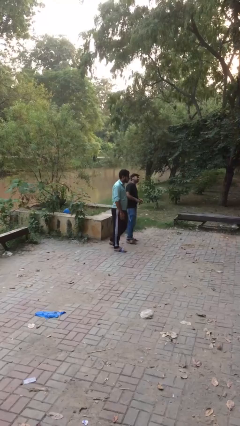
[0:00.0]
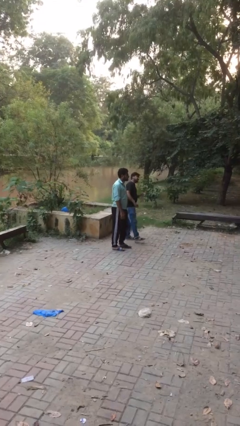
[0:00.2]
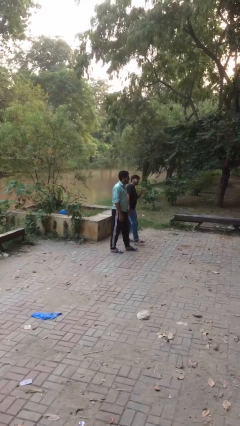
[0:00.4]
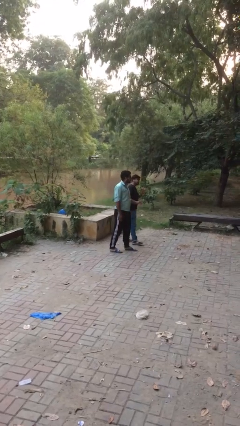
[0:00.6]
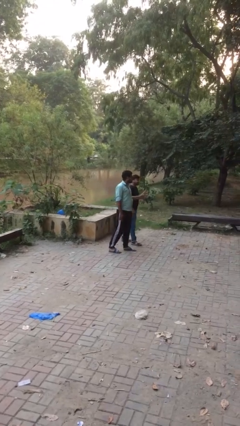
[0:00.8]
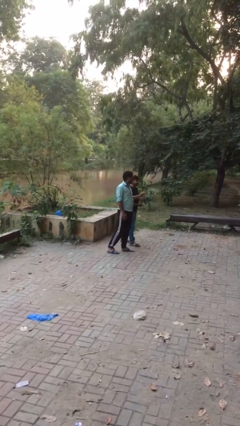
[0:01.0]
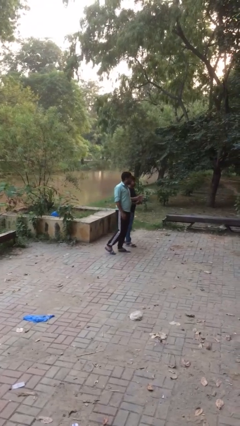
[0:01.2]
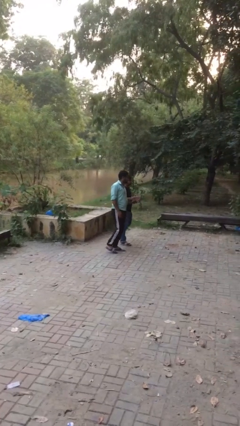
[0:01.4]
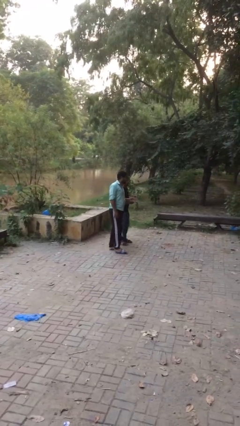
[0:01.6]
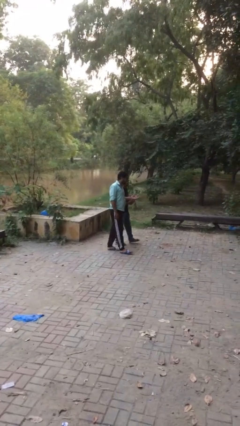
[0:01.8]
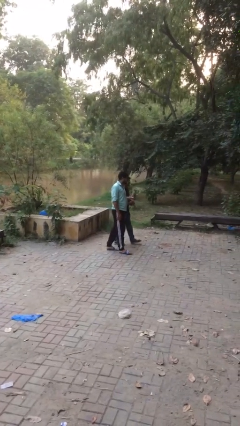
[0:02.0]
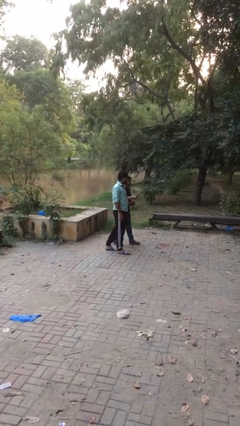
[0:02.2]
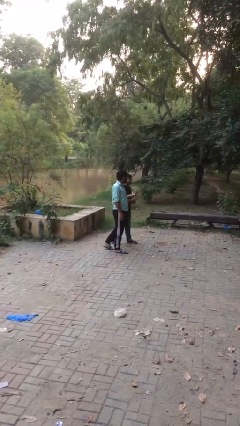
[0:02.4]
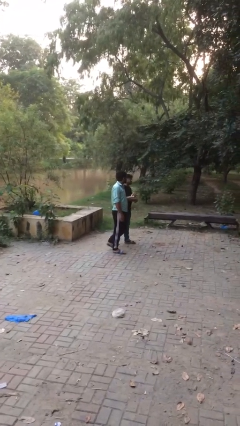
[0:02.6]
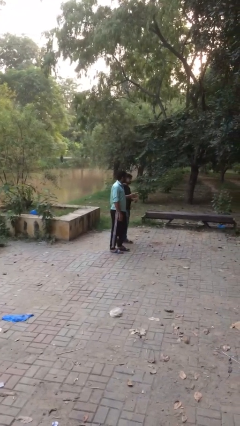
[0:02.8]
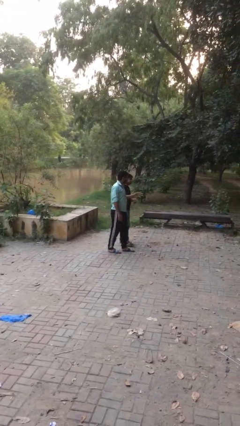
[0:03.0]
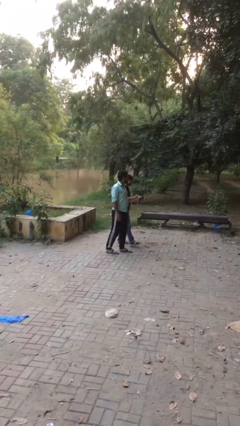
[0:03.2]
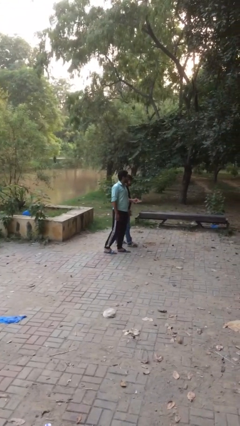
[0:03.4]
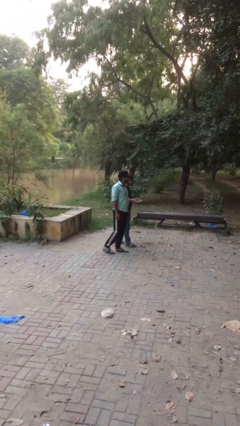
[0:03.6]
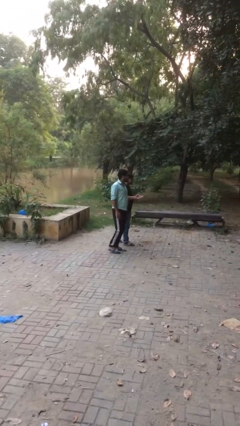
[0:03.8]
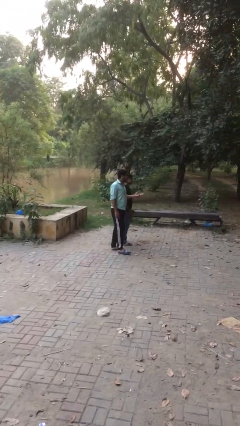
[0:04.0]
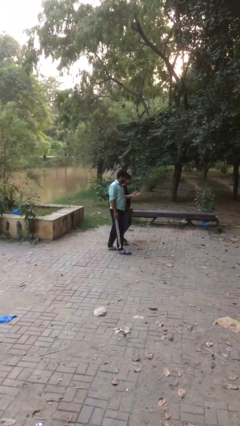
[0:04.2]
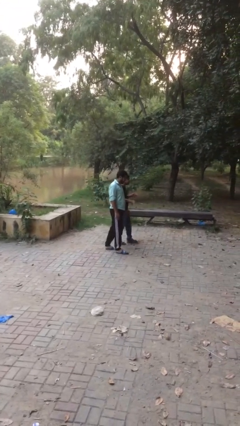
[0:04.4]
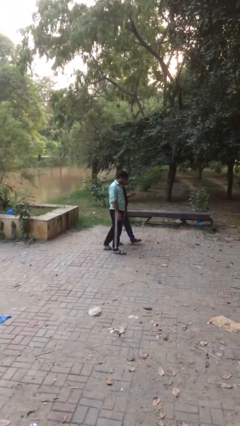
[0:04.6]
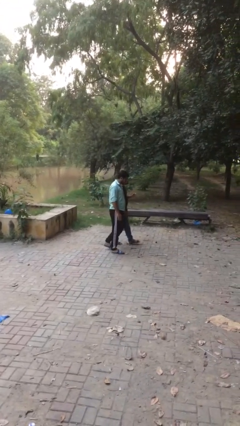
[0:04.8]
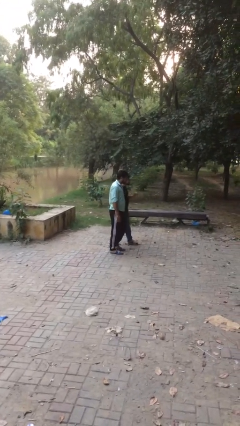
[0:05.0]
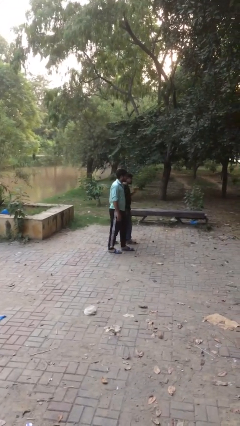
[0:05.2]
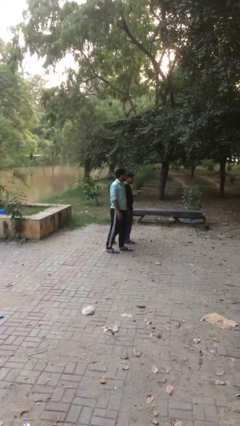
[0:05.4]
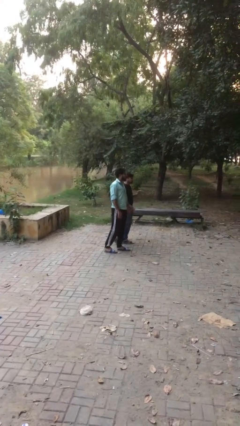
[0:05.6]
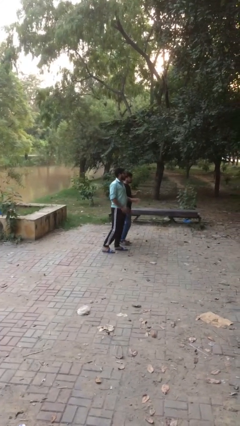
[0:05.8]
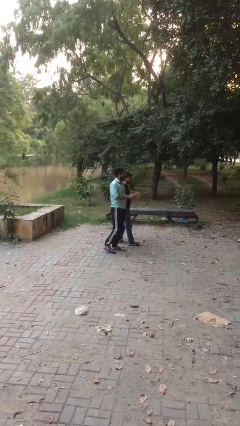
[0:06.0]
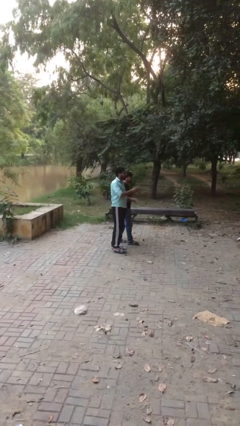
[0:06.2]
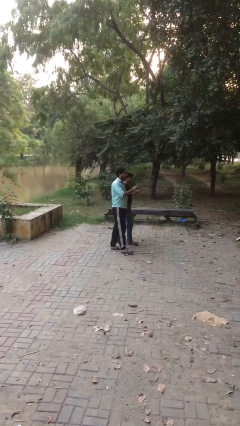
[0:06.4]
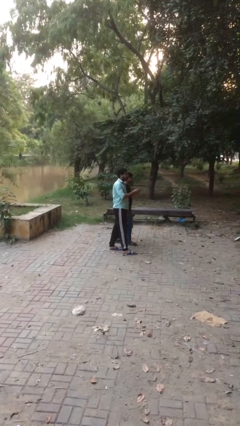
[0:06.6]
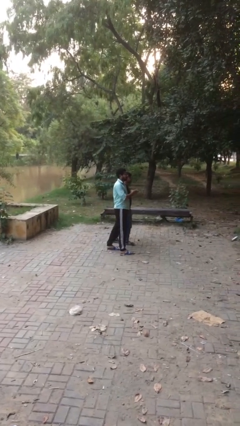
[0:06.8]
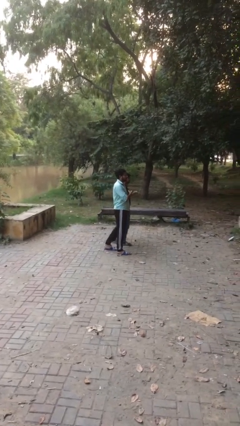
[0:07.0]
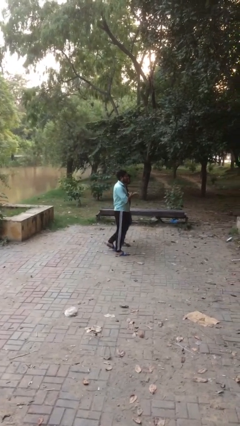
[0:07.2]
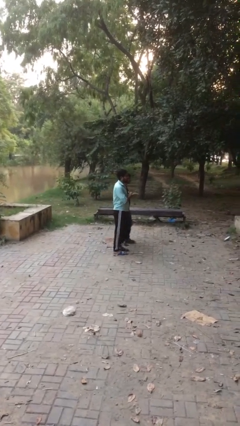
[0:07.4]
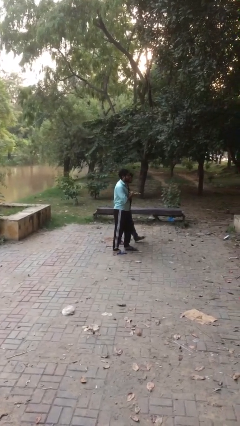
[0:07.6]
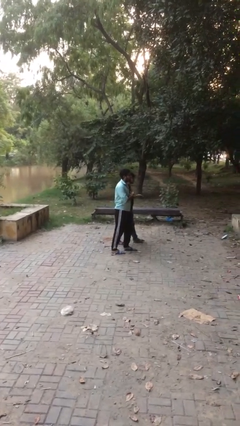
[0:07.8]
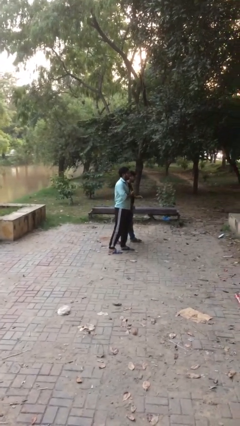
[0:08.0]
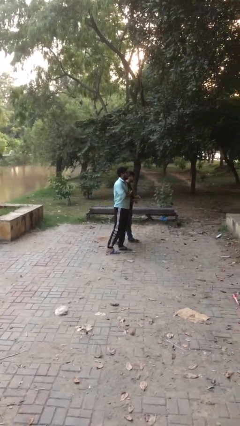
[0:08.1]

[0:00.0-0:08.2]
person talks to person

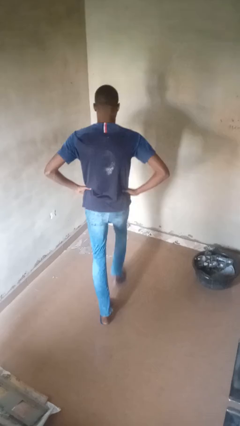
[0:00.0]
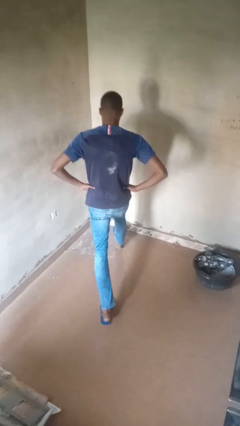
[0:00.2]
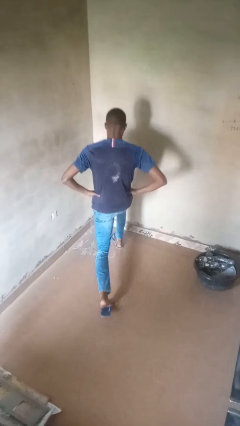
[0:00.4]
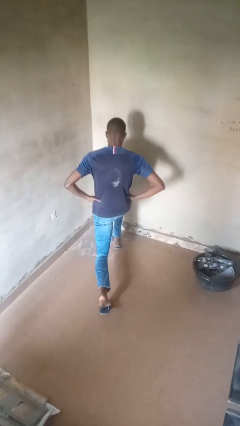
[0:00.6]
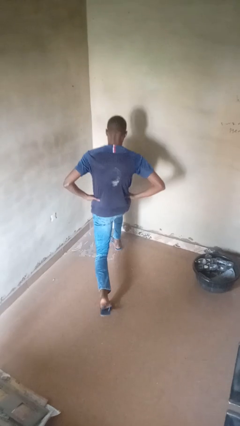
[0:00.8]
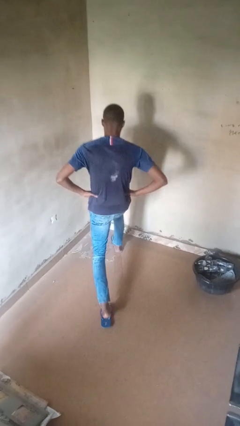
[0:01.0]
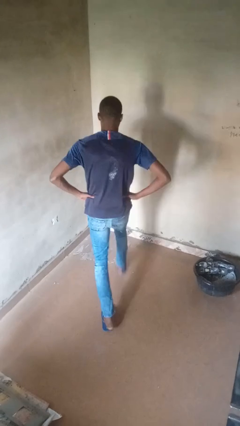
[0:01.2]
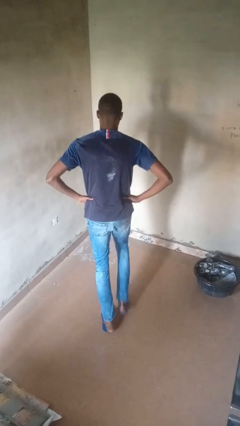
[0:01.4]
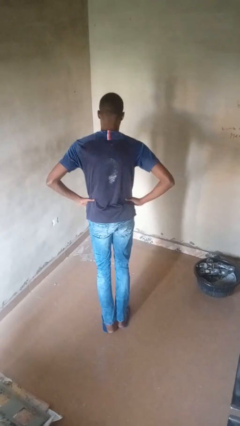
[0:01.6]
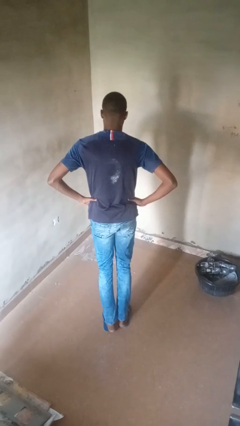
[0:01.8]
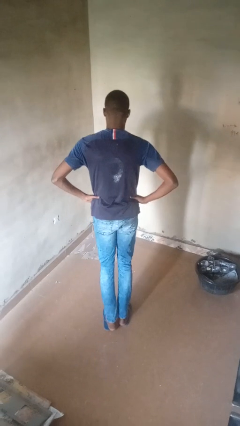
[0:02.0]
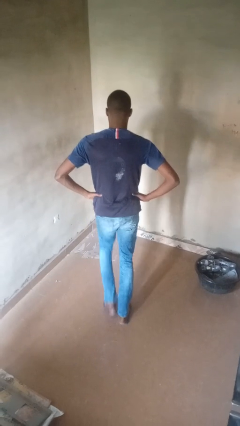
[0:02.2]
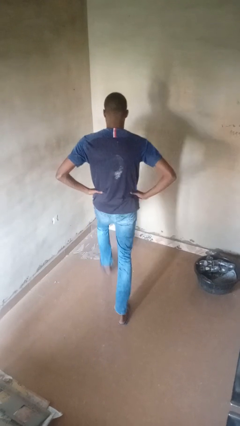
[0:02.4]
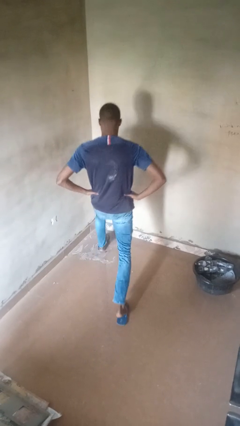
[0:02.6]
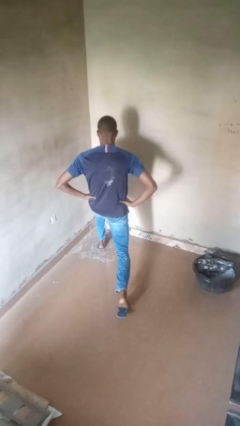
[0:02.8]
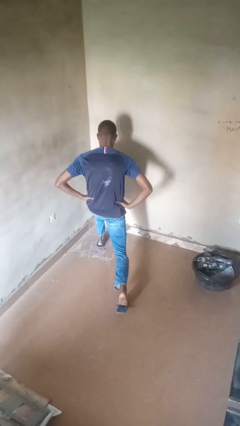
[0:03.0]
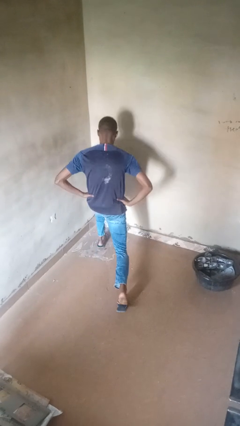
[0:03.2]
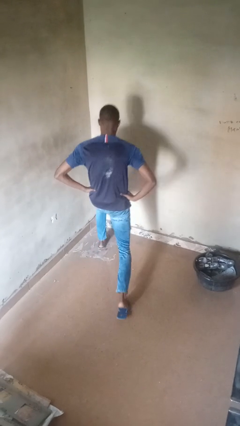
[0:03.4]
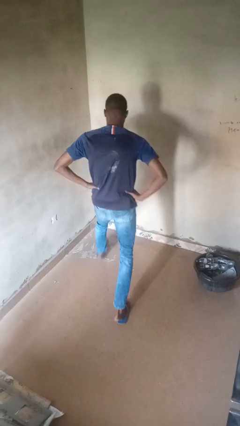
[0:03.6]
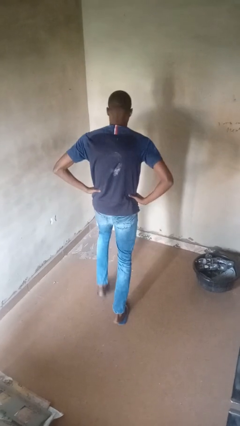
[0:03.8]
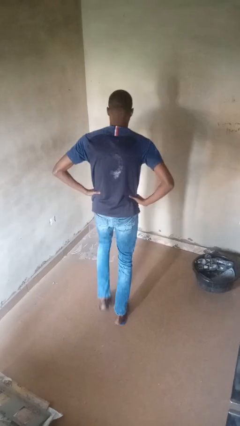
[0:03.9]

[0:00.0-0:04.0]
person exercises with lunges

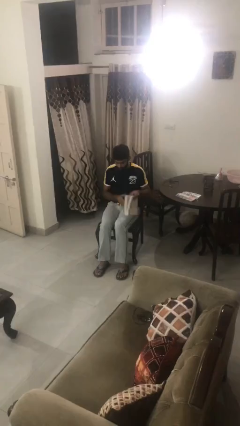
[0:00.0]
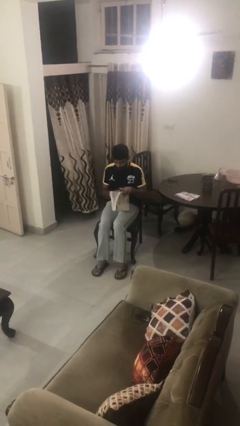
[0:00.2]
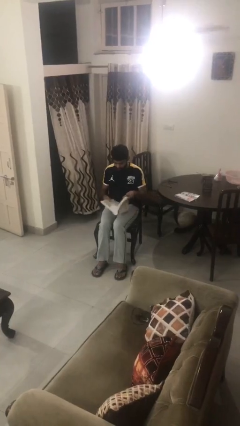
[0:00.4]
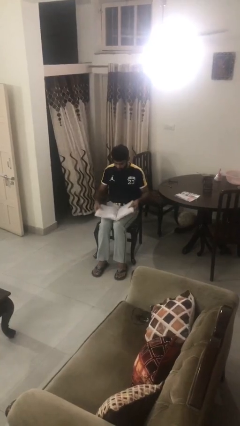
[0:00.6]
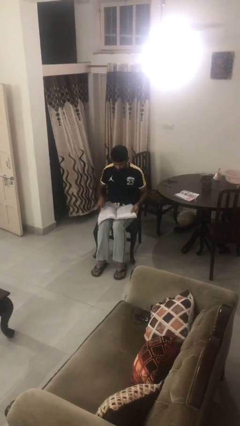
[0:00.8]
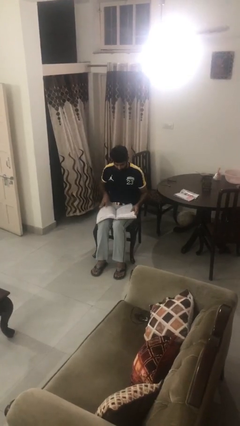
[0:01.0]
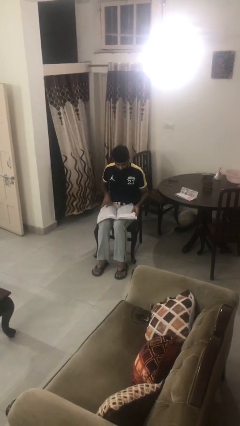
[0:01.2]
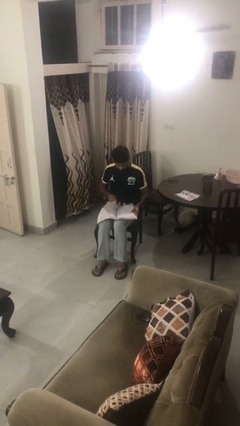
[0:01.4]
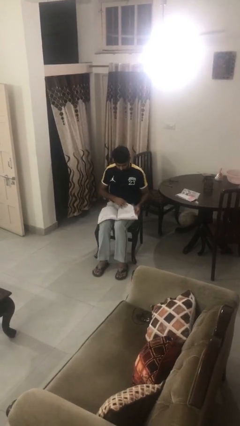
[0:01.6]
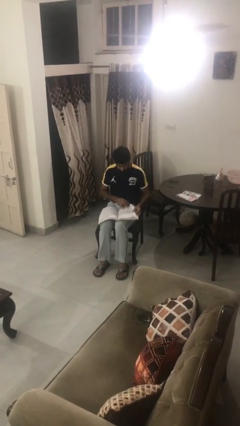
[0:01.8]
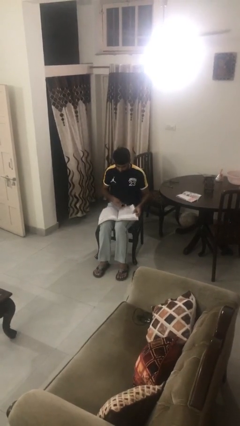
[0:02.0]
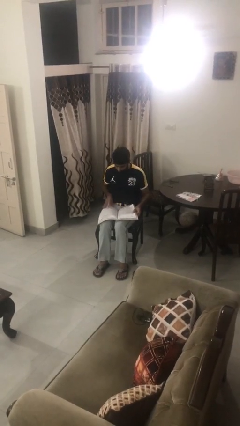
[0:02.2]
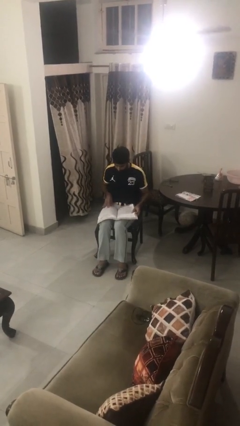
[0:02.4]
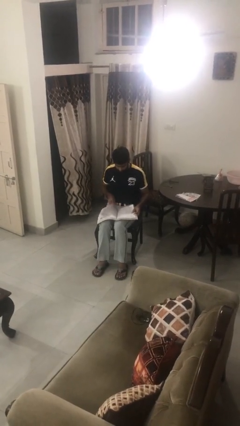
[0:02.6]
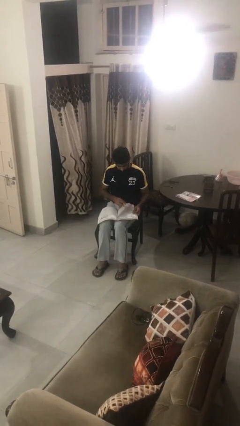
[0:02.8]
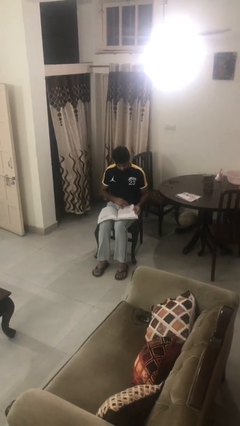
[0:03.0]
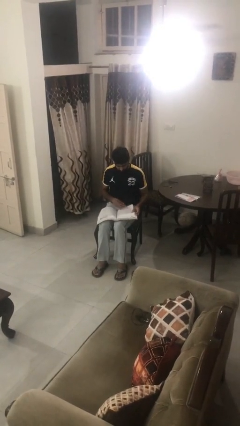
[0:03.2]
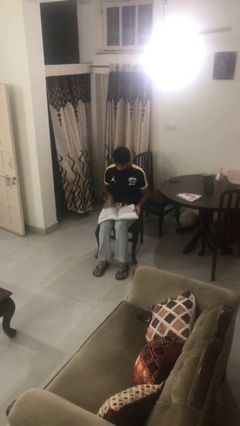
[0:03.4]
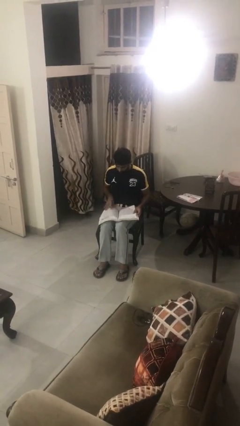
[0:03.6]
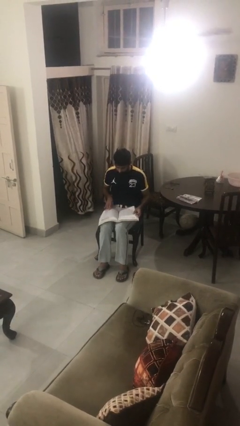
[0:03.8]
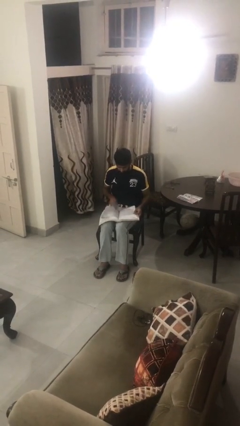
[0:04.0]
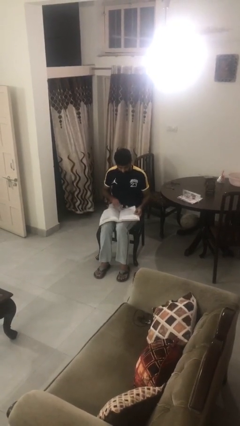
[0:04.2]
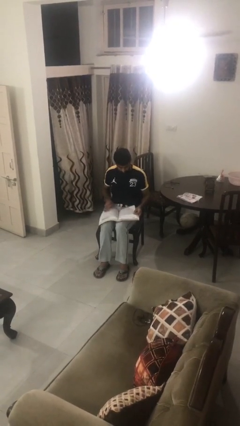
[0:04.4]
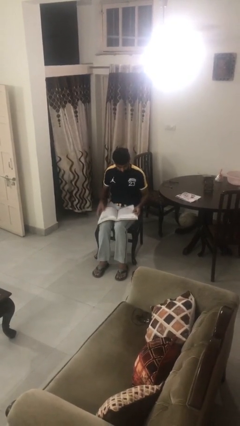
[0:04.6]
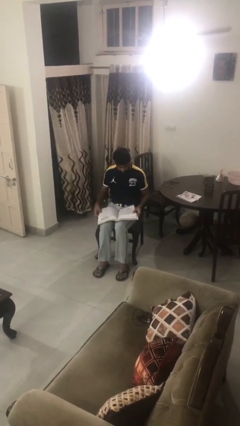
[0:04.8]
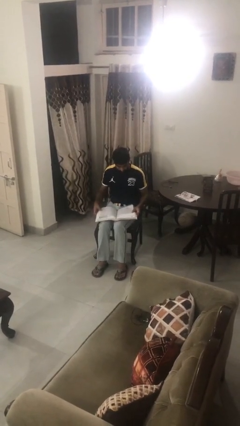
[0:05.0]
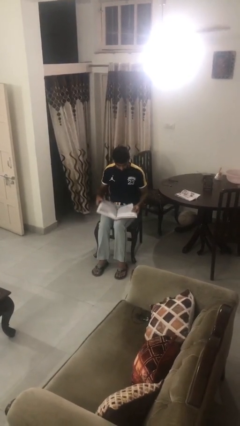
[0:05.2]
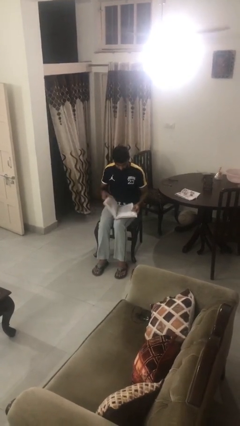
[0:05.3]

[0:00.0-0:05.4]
person reads book
